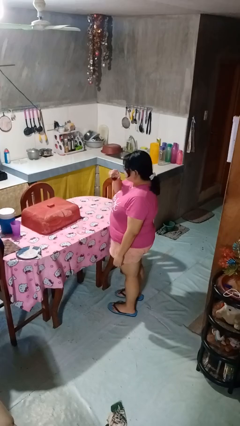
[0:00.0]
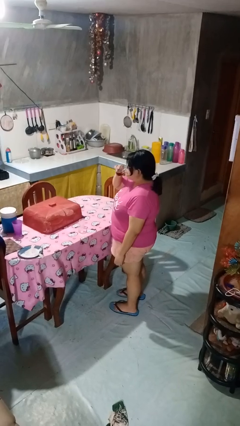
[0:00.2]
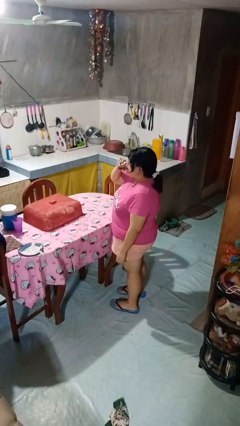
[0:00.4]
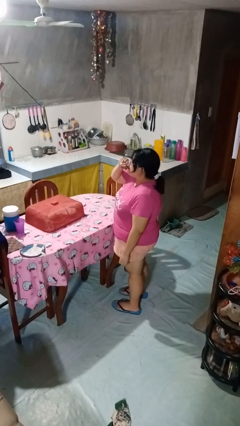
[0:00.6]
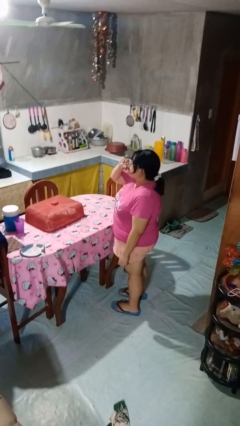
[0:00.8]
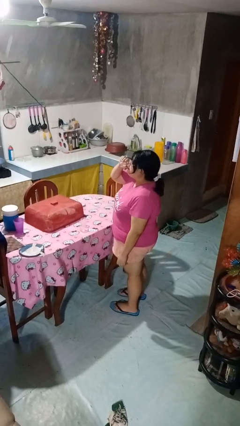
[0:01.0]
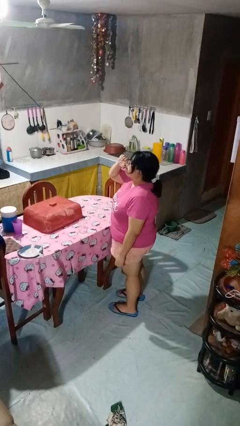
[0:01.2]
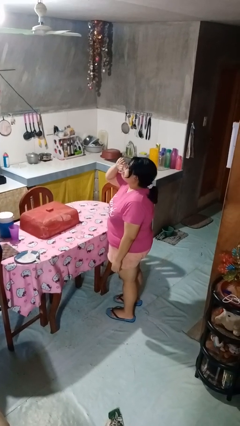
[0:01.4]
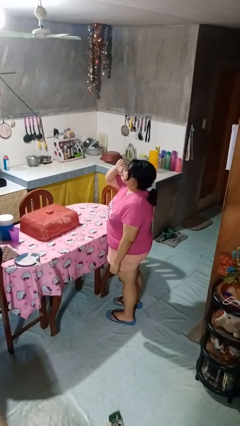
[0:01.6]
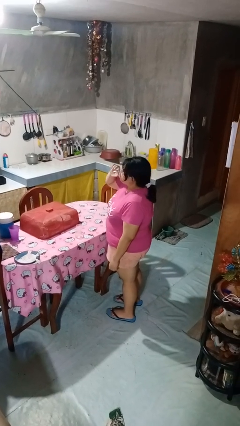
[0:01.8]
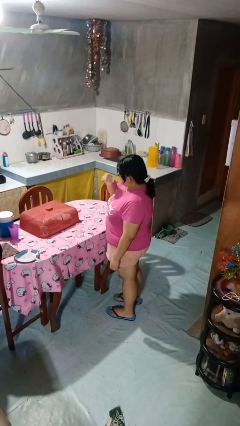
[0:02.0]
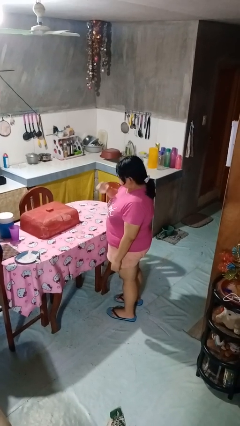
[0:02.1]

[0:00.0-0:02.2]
person drinks from shotglass

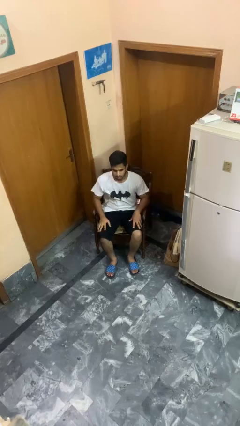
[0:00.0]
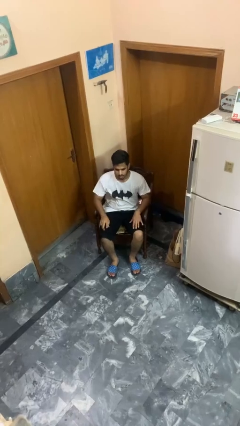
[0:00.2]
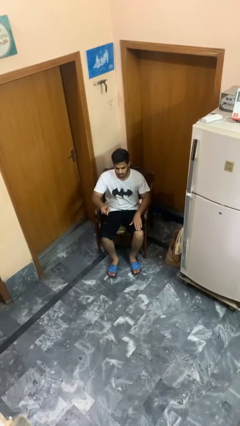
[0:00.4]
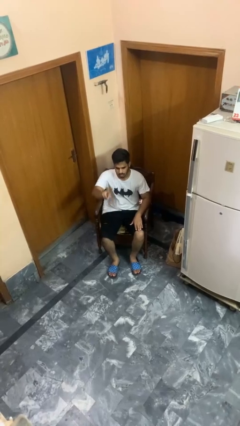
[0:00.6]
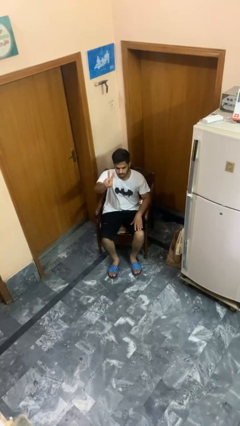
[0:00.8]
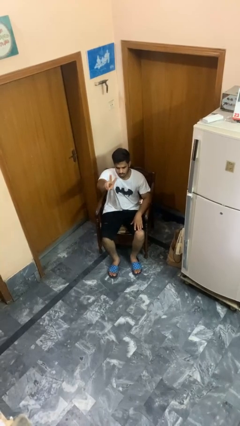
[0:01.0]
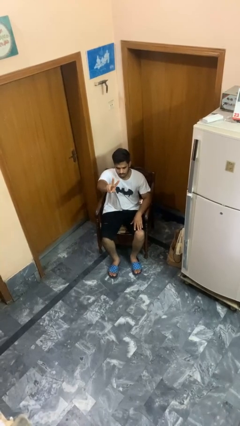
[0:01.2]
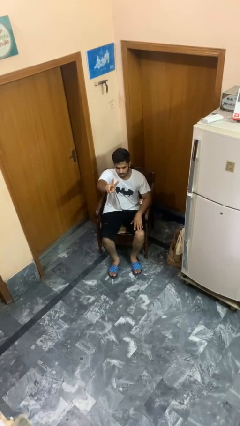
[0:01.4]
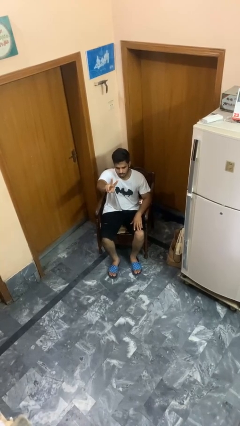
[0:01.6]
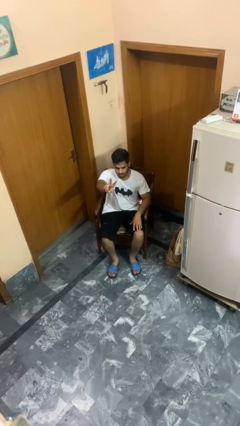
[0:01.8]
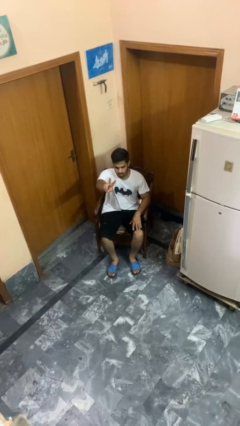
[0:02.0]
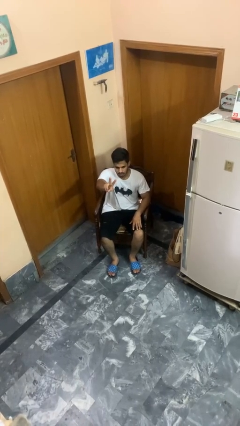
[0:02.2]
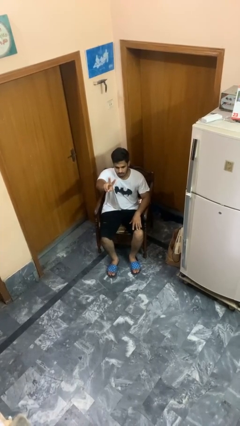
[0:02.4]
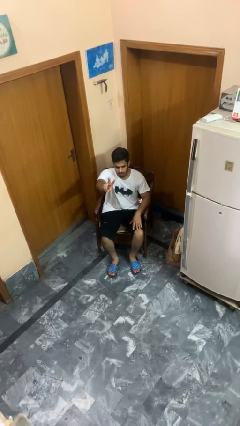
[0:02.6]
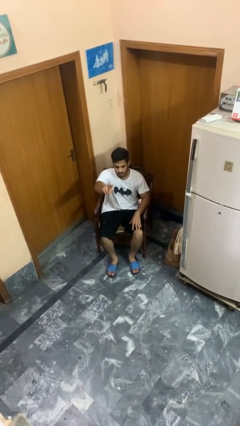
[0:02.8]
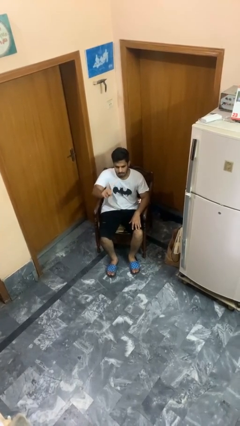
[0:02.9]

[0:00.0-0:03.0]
person gestures peace

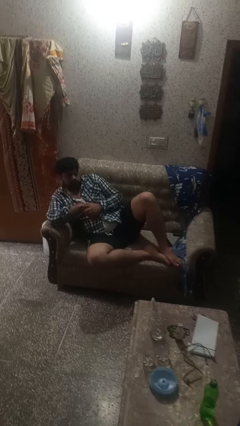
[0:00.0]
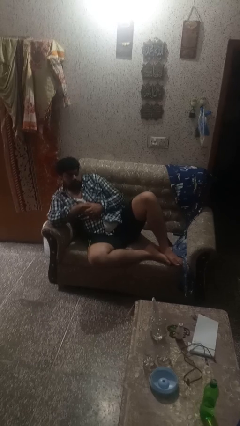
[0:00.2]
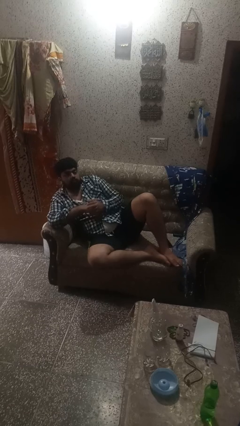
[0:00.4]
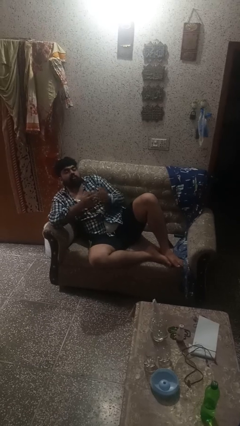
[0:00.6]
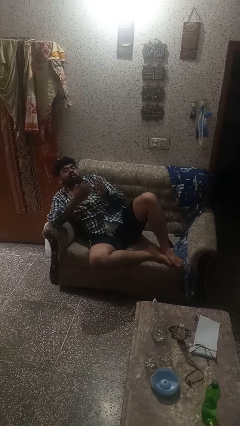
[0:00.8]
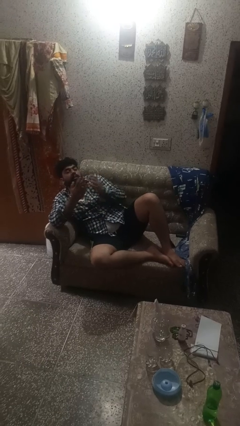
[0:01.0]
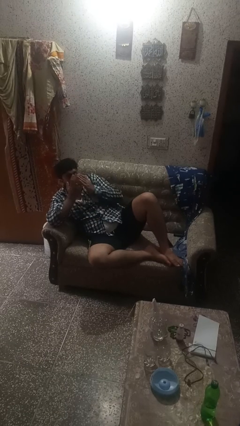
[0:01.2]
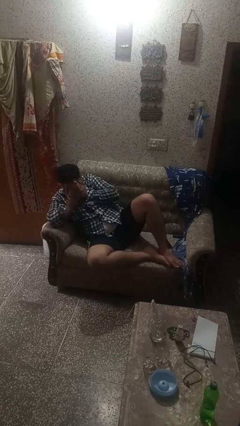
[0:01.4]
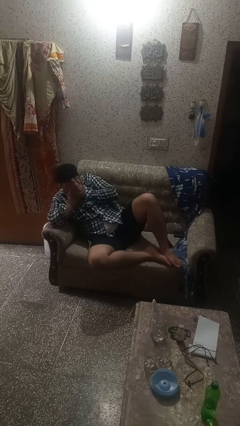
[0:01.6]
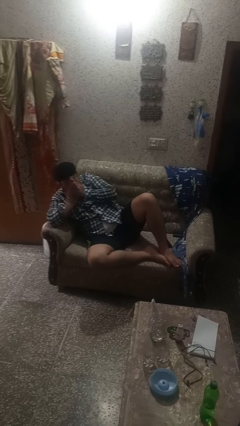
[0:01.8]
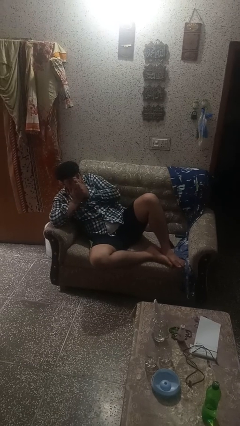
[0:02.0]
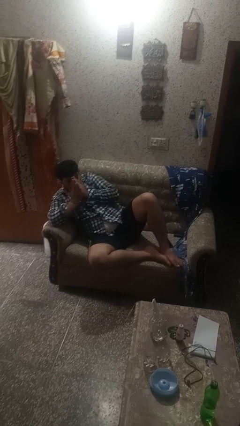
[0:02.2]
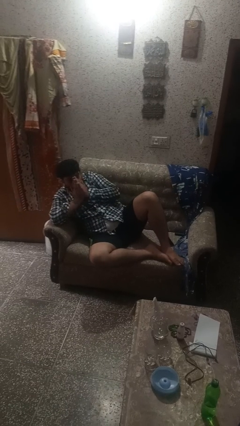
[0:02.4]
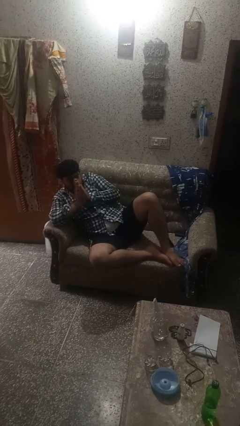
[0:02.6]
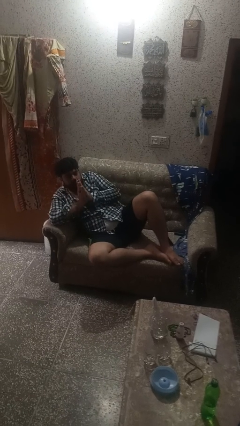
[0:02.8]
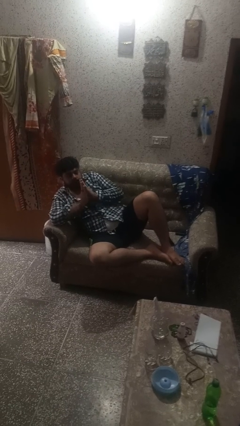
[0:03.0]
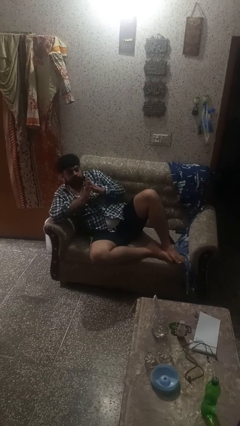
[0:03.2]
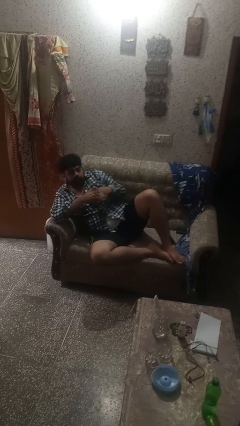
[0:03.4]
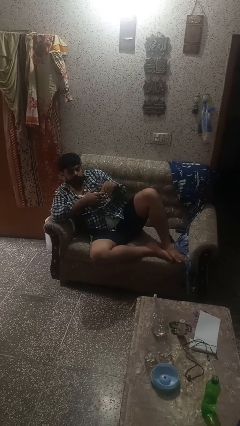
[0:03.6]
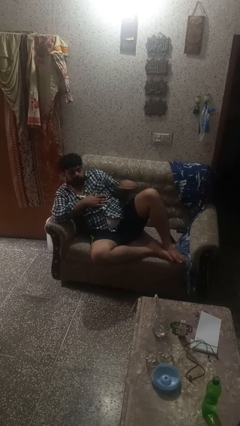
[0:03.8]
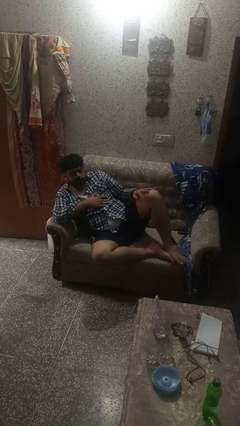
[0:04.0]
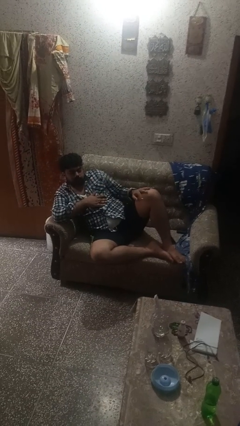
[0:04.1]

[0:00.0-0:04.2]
person sneezes into hand

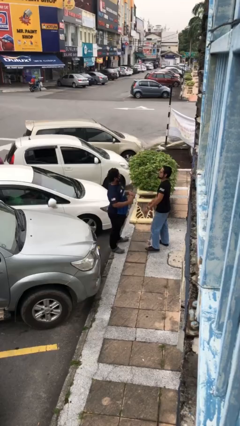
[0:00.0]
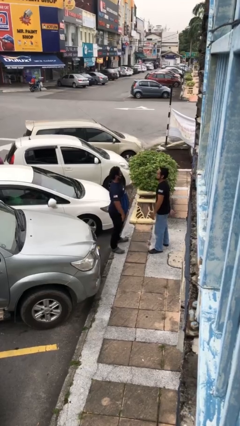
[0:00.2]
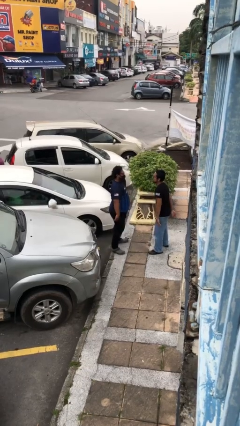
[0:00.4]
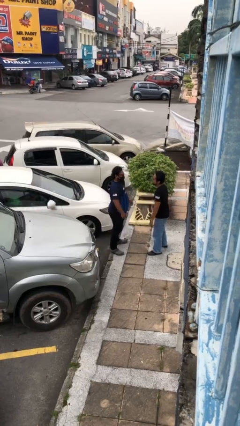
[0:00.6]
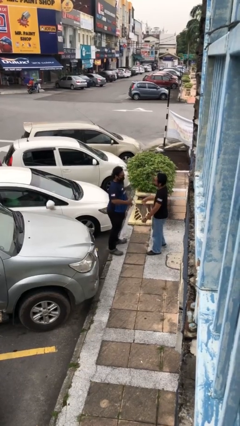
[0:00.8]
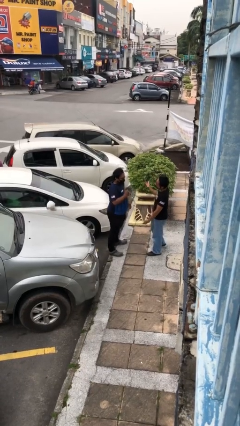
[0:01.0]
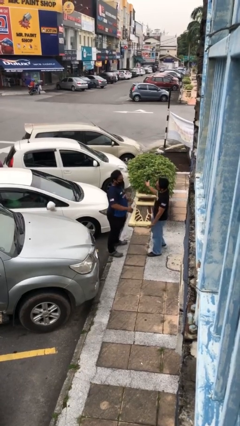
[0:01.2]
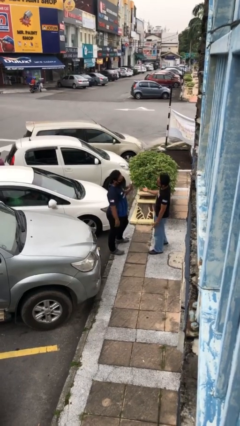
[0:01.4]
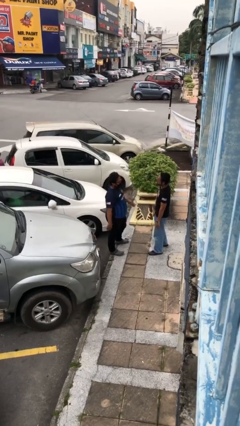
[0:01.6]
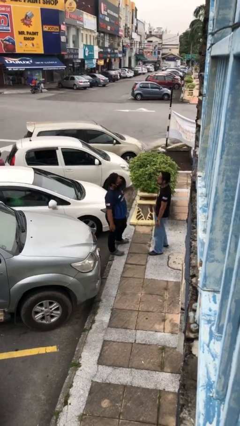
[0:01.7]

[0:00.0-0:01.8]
person talks to person

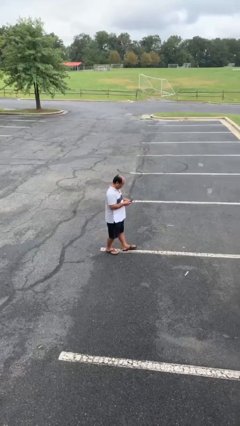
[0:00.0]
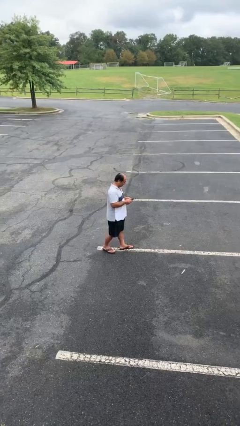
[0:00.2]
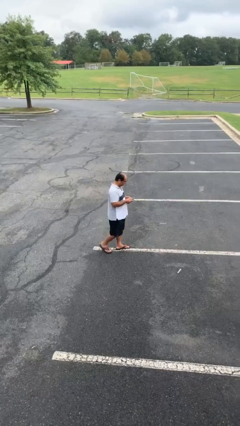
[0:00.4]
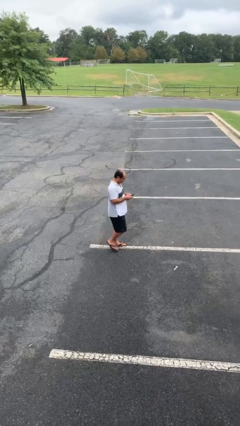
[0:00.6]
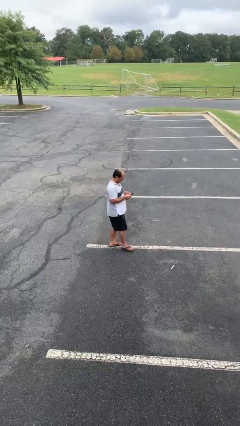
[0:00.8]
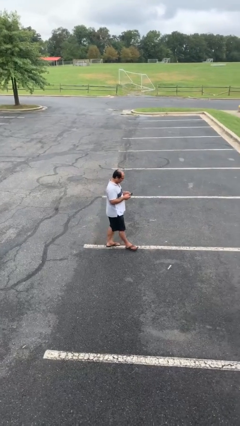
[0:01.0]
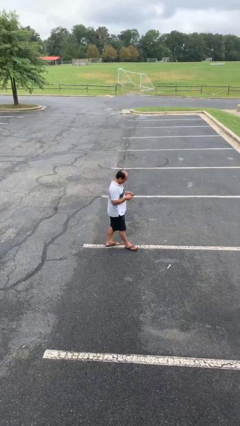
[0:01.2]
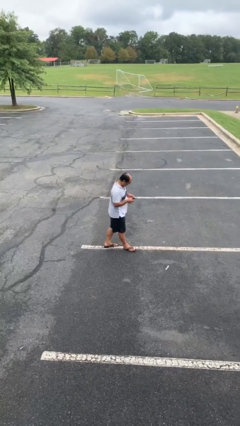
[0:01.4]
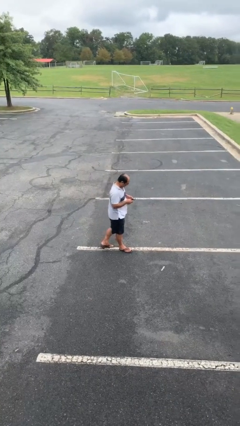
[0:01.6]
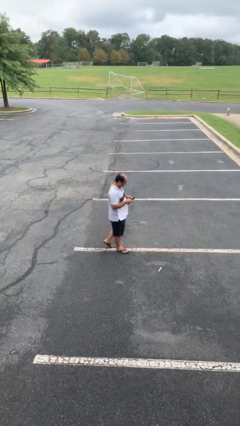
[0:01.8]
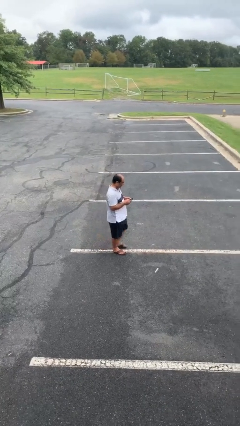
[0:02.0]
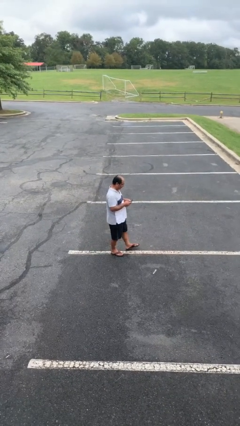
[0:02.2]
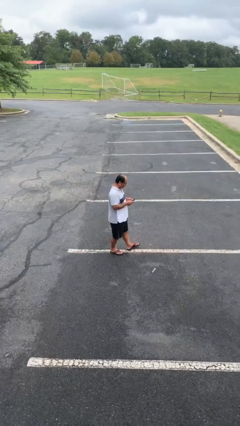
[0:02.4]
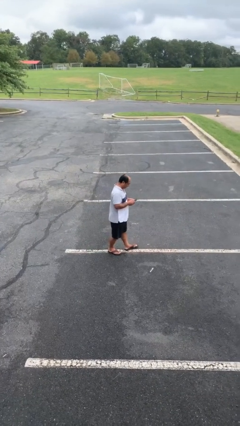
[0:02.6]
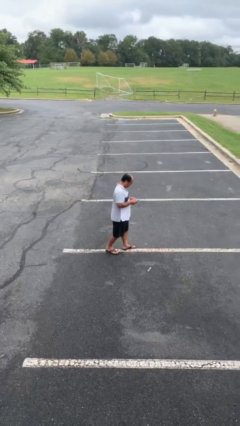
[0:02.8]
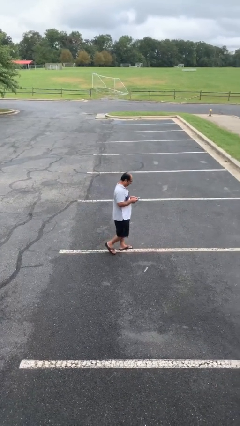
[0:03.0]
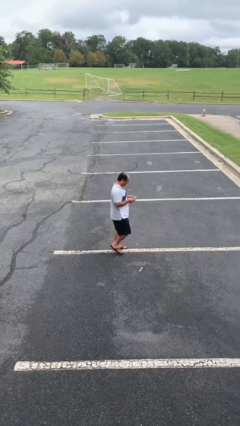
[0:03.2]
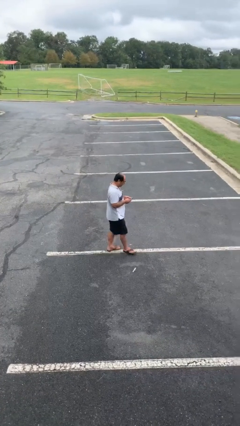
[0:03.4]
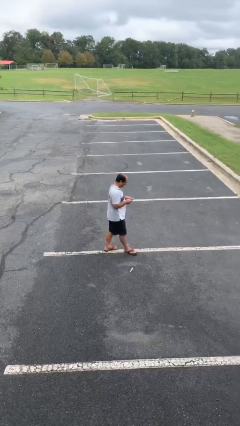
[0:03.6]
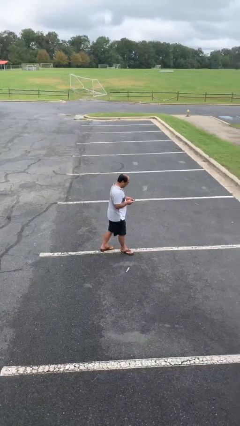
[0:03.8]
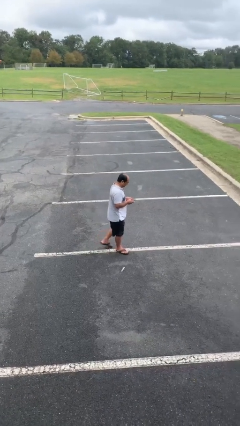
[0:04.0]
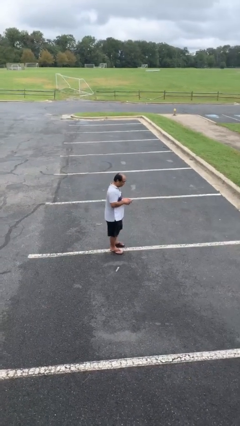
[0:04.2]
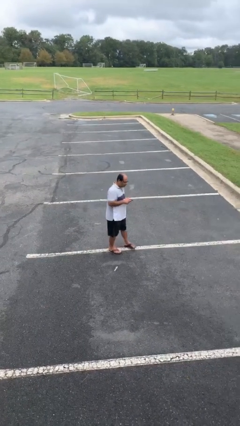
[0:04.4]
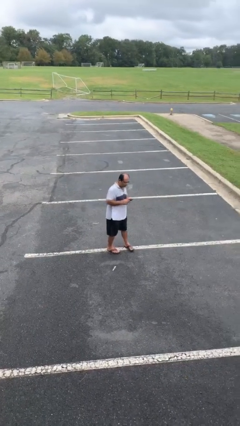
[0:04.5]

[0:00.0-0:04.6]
person texts on phone

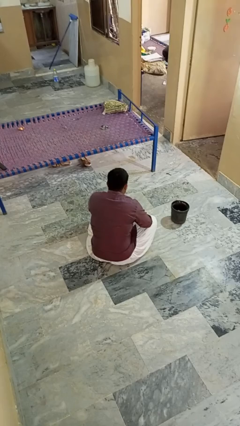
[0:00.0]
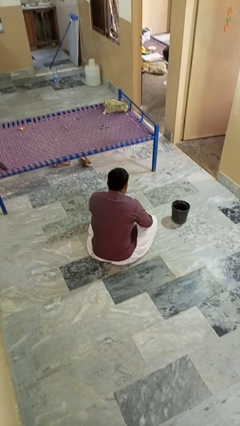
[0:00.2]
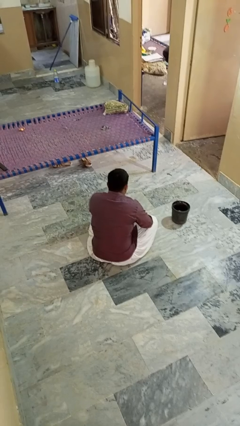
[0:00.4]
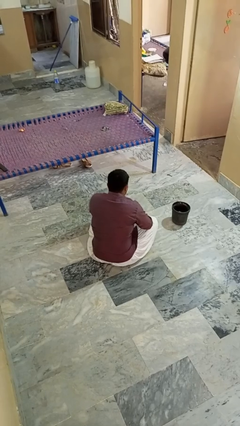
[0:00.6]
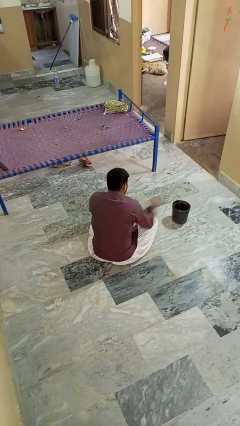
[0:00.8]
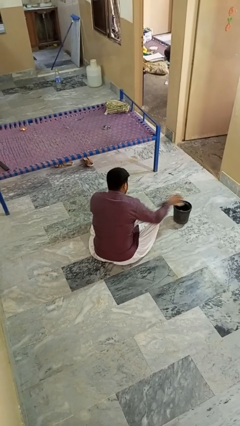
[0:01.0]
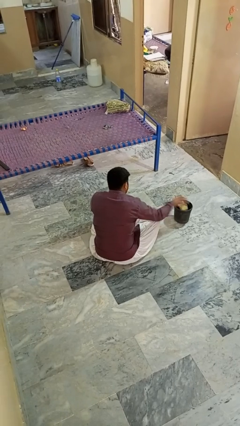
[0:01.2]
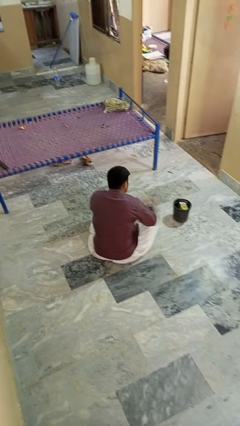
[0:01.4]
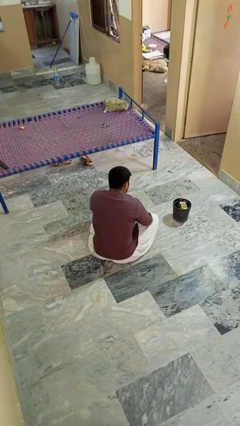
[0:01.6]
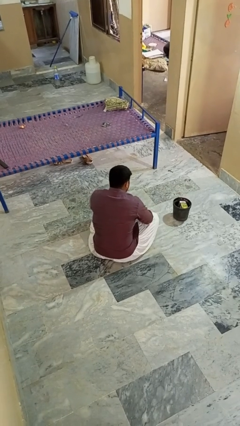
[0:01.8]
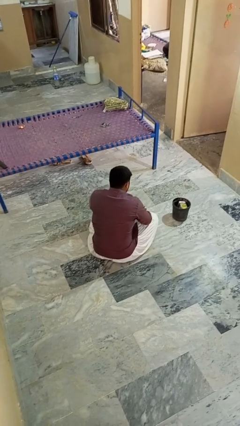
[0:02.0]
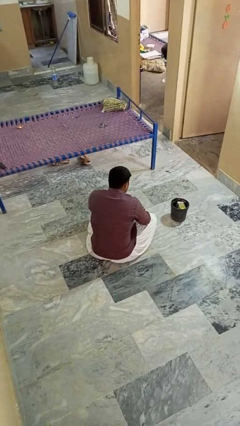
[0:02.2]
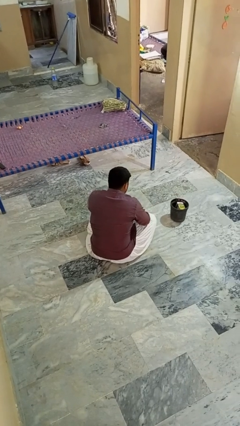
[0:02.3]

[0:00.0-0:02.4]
person puts object into basket
